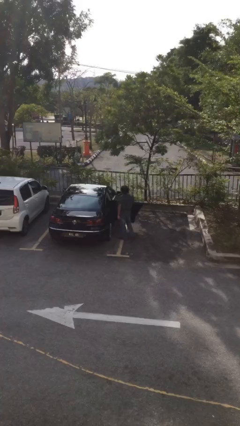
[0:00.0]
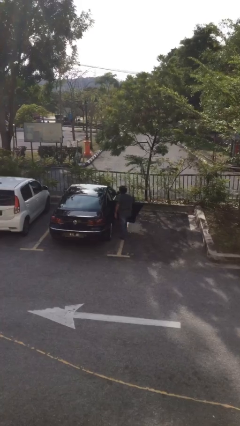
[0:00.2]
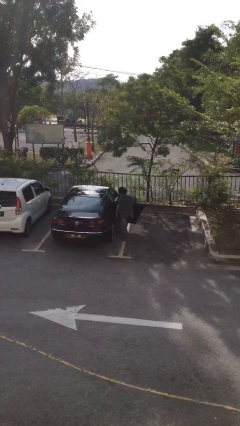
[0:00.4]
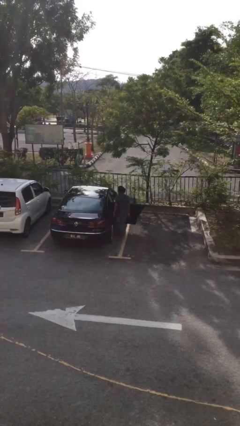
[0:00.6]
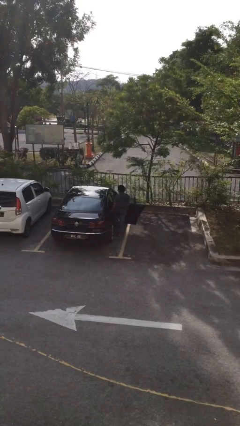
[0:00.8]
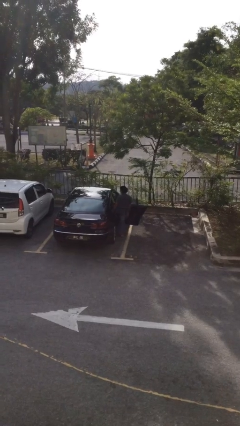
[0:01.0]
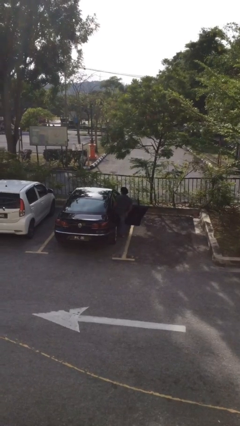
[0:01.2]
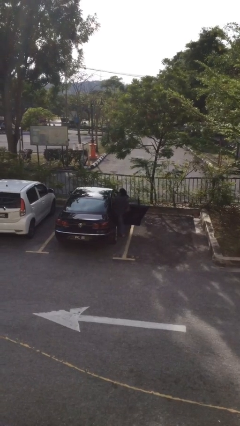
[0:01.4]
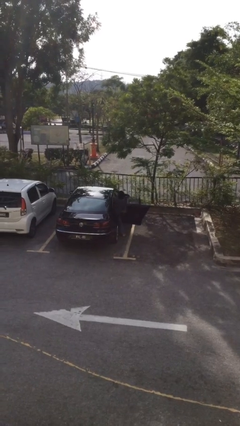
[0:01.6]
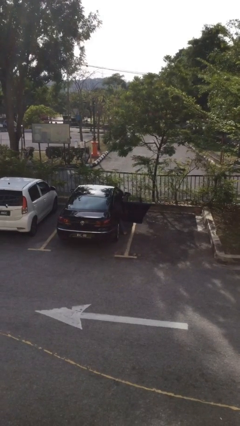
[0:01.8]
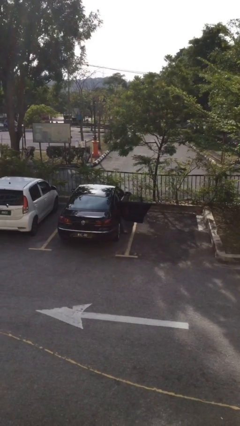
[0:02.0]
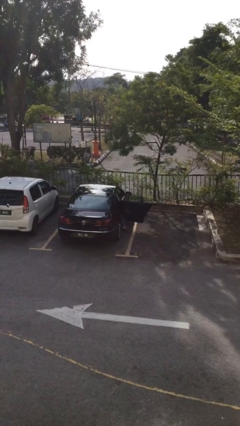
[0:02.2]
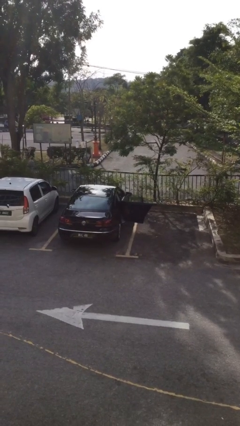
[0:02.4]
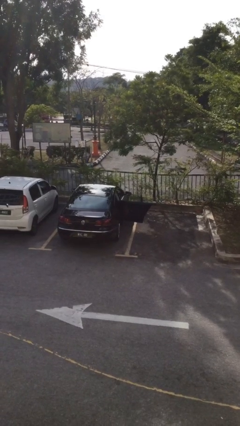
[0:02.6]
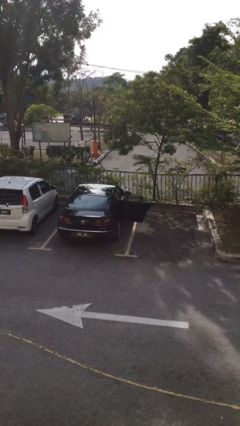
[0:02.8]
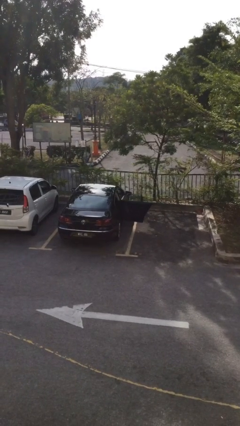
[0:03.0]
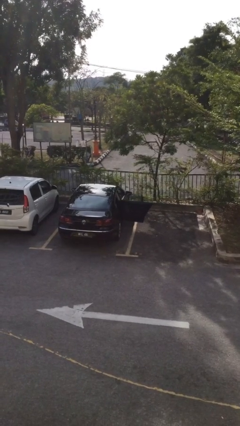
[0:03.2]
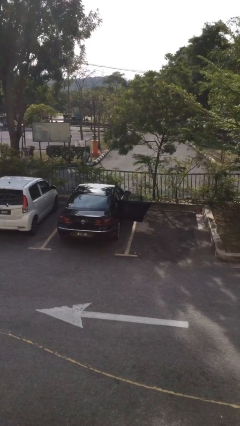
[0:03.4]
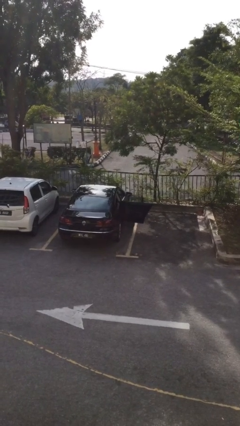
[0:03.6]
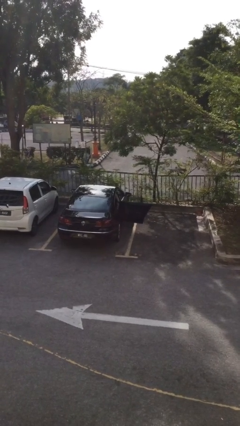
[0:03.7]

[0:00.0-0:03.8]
person enters car

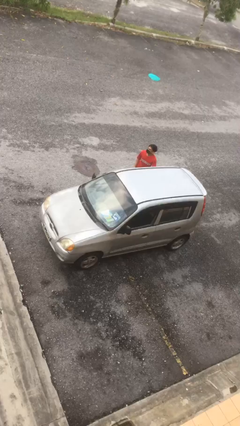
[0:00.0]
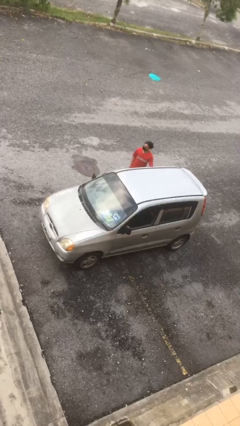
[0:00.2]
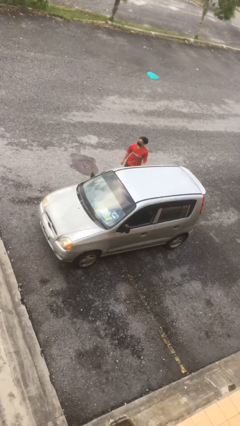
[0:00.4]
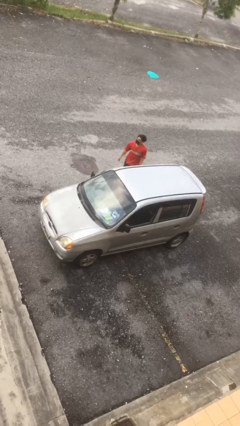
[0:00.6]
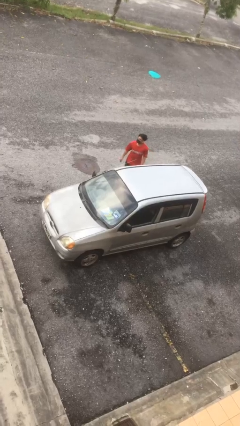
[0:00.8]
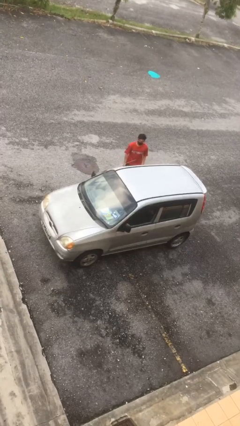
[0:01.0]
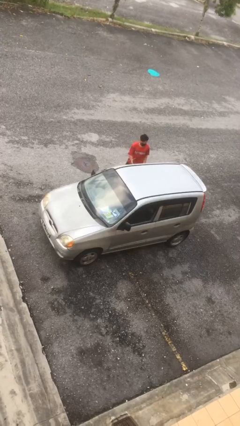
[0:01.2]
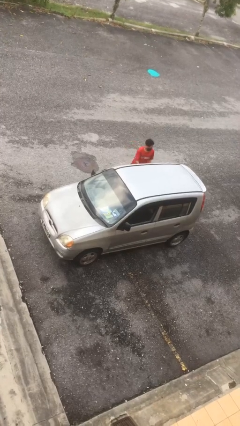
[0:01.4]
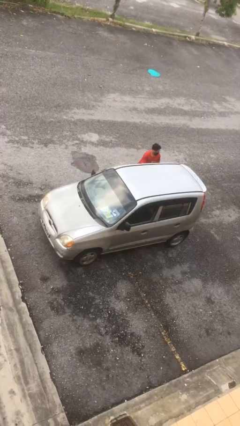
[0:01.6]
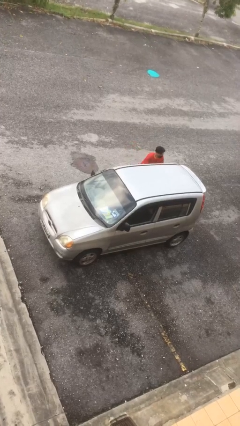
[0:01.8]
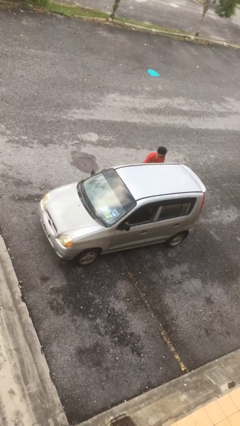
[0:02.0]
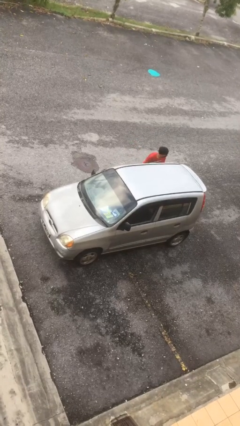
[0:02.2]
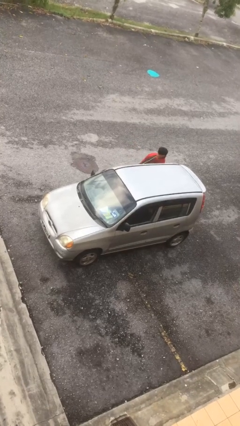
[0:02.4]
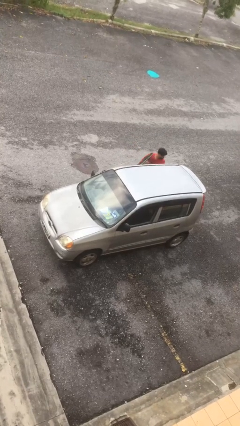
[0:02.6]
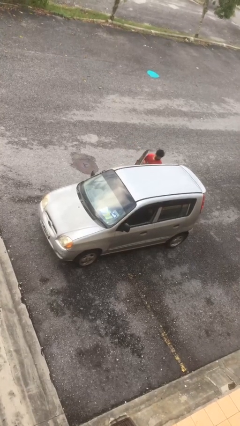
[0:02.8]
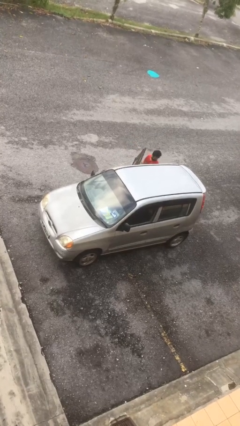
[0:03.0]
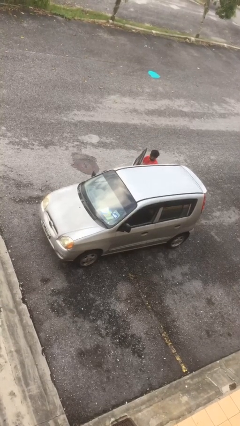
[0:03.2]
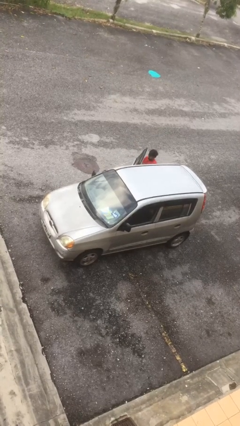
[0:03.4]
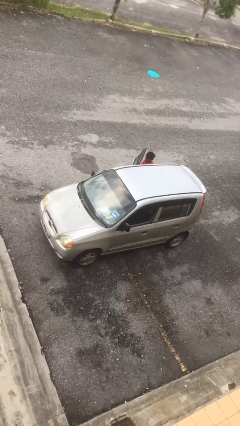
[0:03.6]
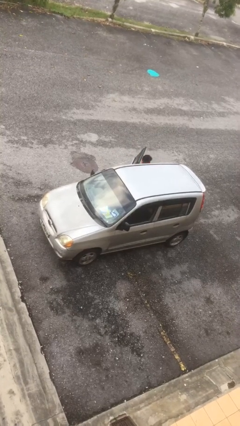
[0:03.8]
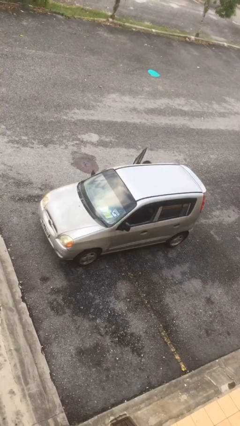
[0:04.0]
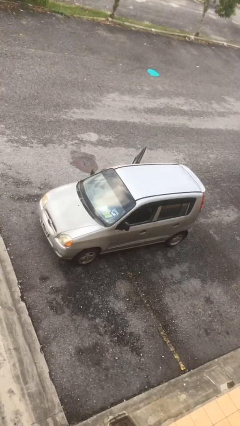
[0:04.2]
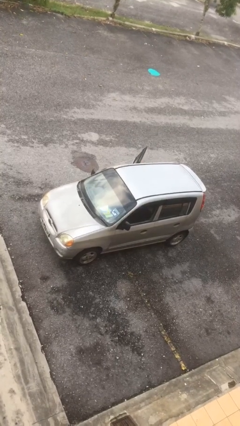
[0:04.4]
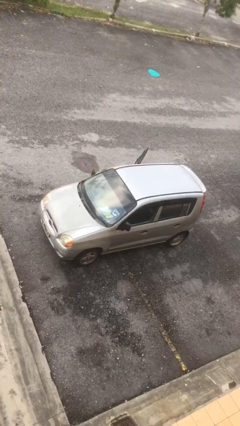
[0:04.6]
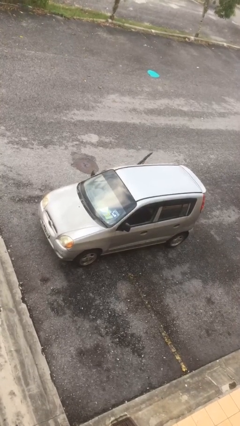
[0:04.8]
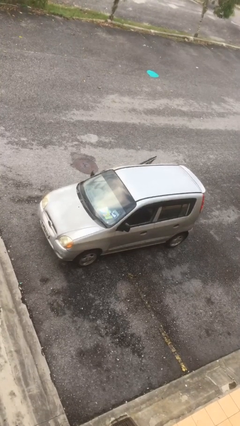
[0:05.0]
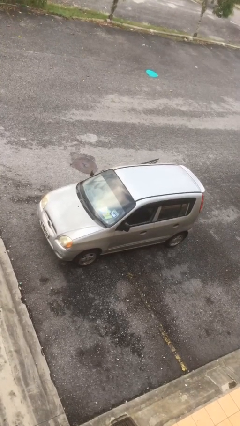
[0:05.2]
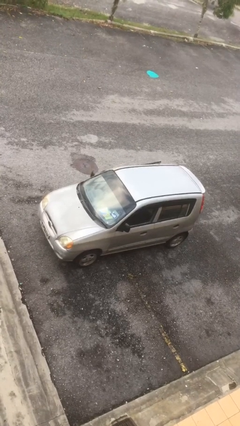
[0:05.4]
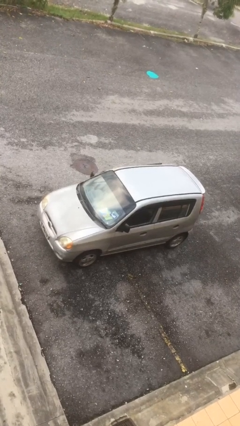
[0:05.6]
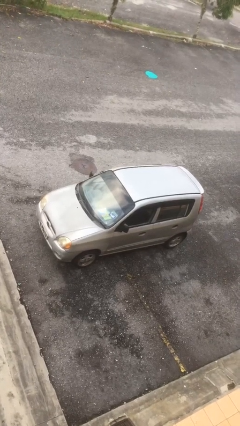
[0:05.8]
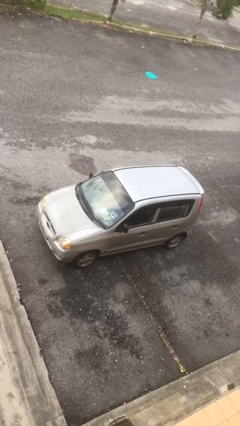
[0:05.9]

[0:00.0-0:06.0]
car picks up person

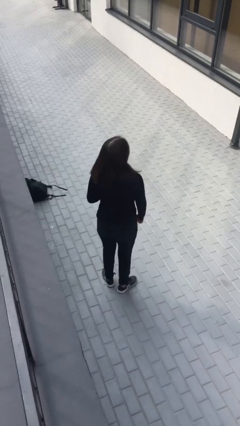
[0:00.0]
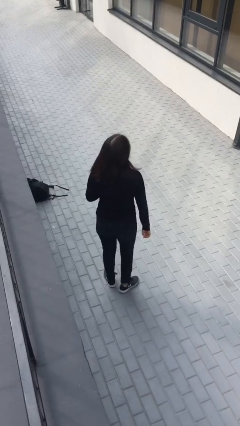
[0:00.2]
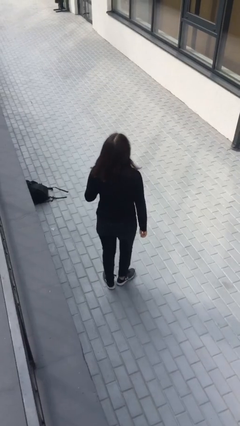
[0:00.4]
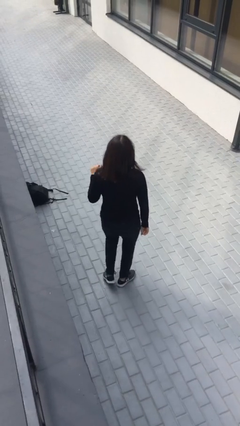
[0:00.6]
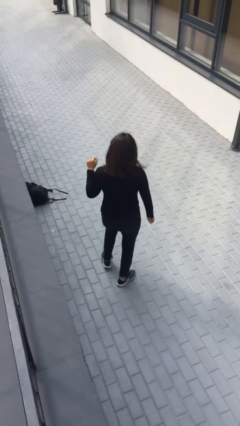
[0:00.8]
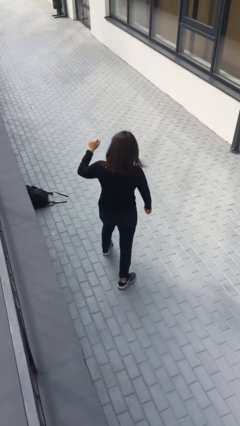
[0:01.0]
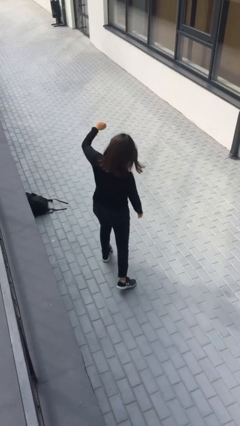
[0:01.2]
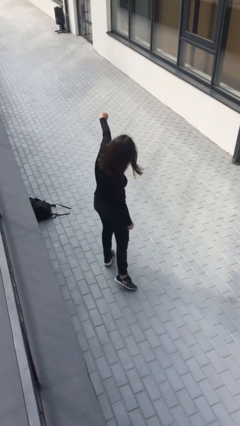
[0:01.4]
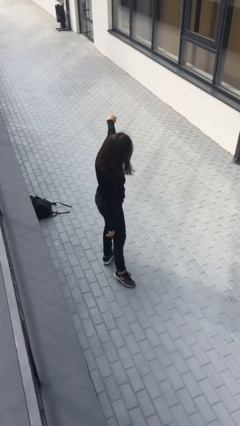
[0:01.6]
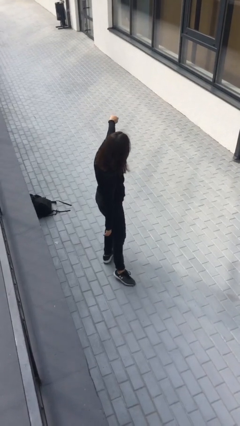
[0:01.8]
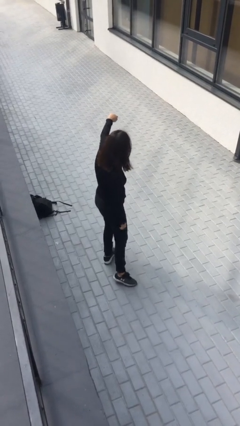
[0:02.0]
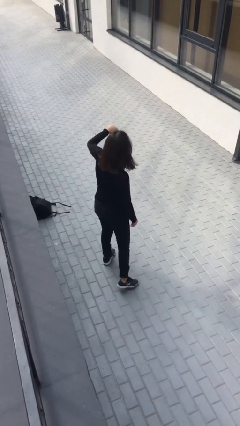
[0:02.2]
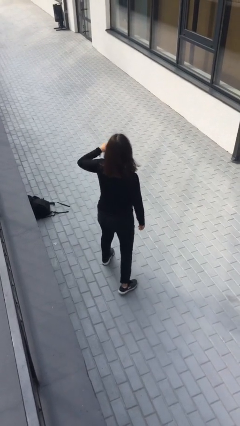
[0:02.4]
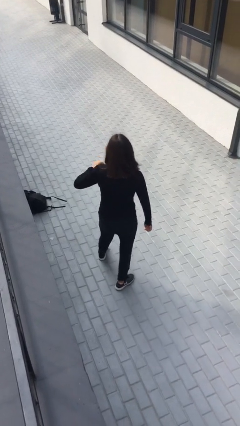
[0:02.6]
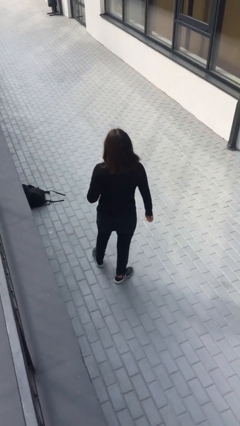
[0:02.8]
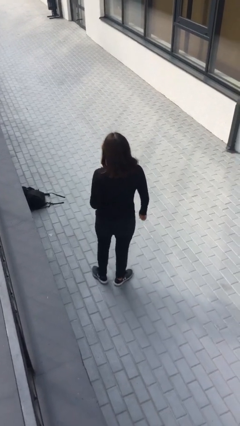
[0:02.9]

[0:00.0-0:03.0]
person punches

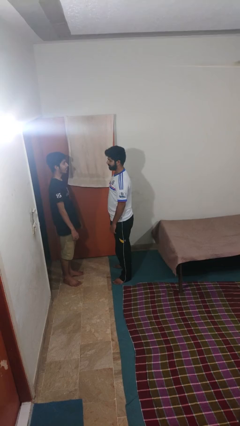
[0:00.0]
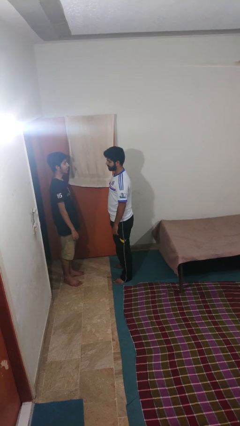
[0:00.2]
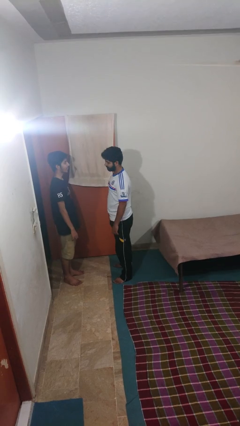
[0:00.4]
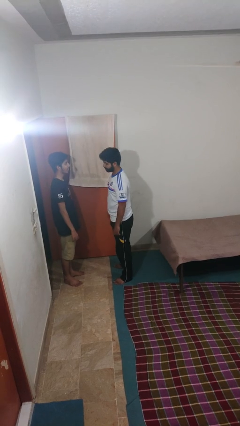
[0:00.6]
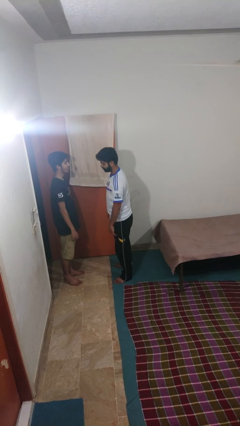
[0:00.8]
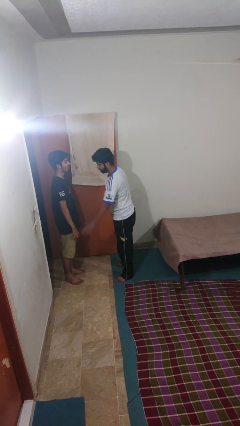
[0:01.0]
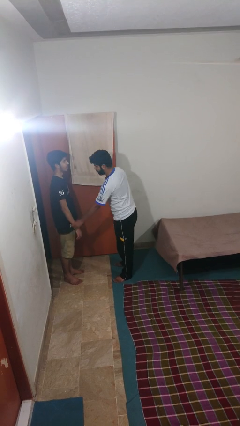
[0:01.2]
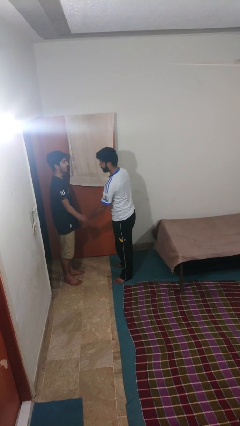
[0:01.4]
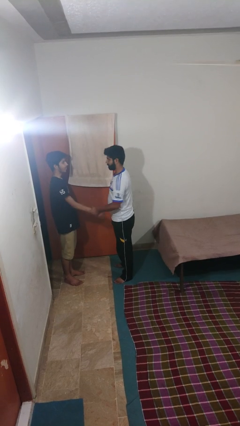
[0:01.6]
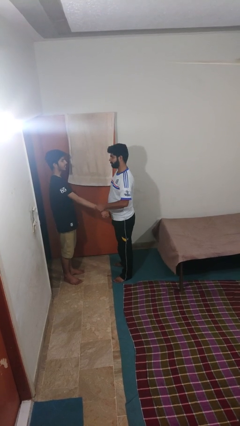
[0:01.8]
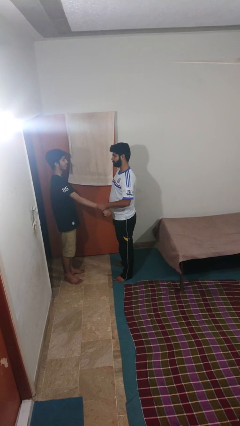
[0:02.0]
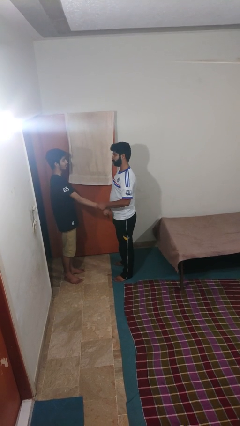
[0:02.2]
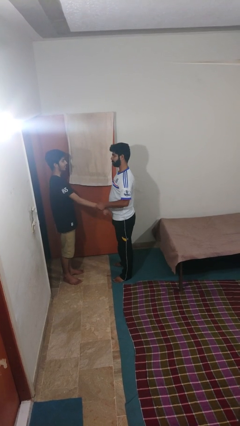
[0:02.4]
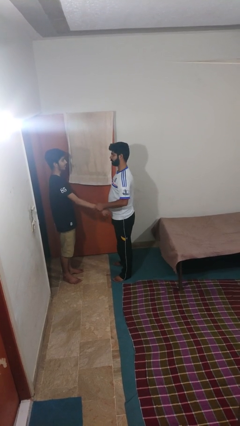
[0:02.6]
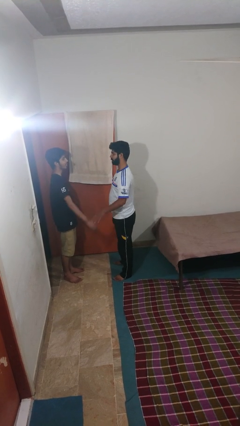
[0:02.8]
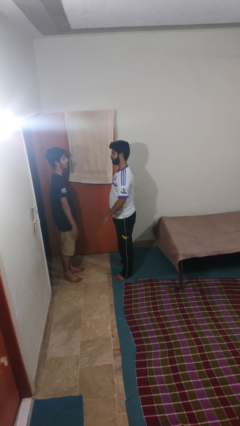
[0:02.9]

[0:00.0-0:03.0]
person grabs person by forearm

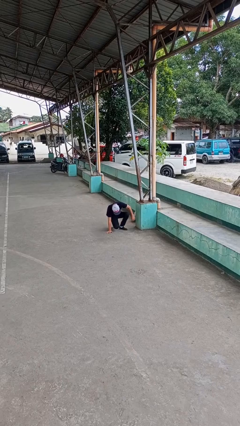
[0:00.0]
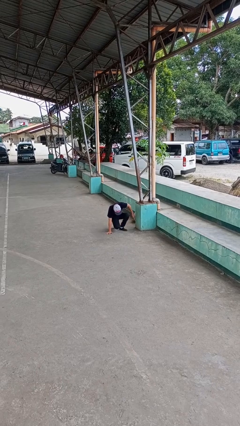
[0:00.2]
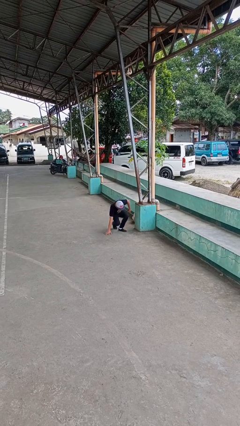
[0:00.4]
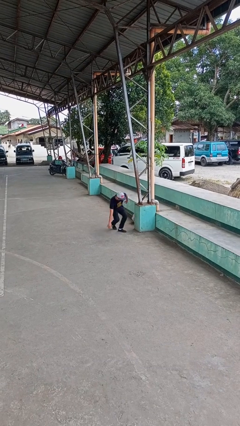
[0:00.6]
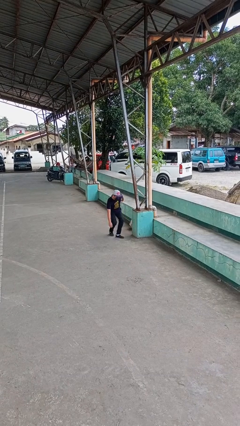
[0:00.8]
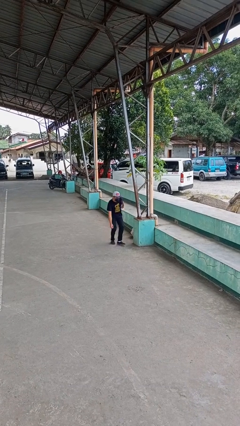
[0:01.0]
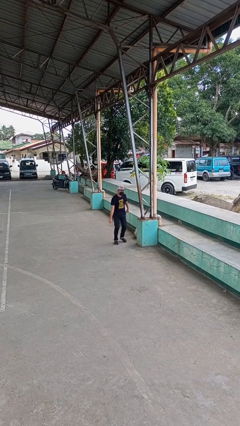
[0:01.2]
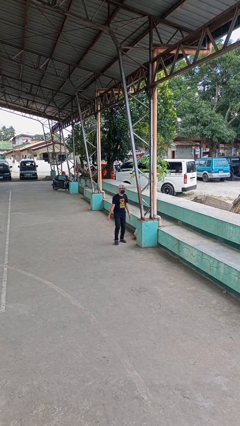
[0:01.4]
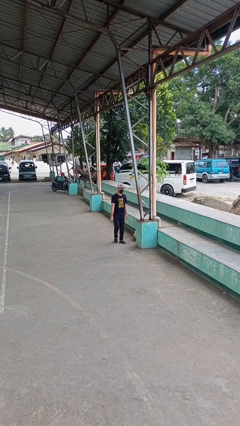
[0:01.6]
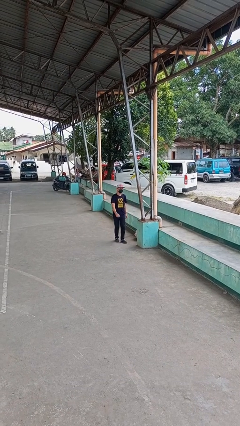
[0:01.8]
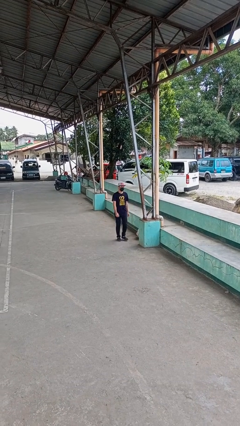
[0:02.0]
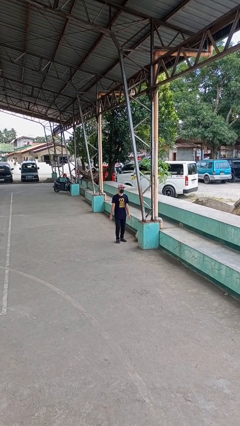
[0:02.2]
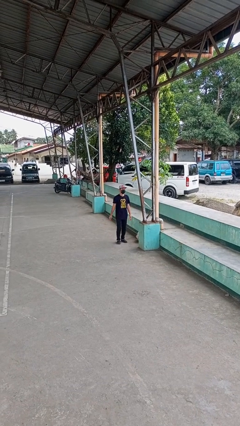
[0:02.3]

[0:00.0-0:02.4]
person stands up from floor
